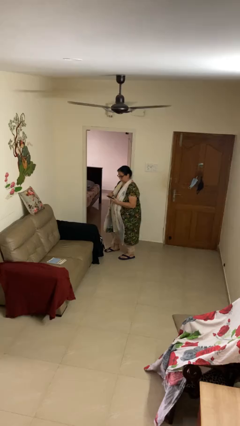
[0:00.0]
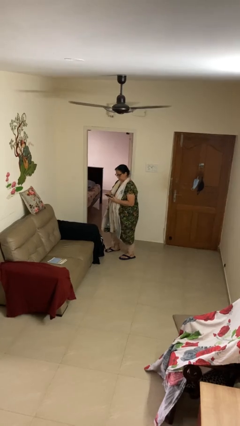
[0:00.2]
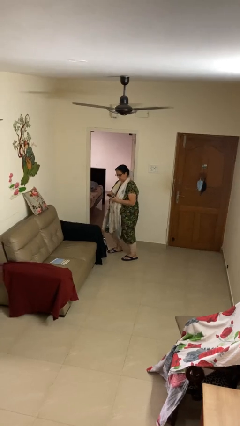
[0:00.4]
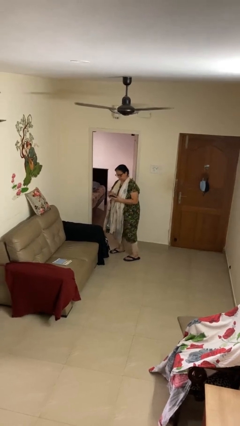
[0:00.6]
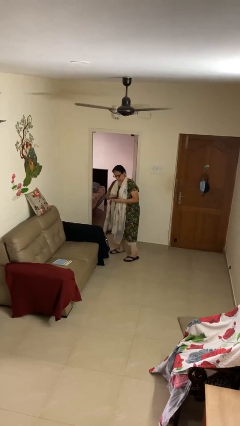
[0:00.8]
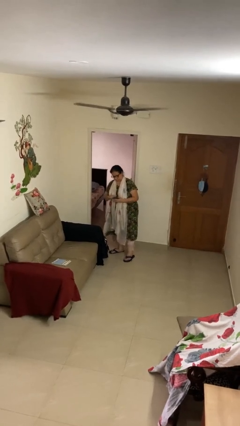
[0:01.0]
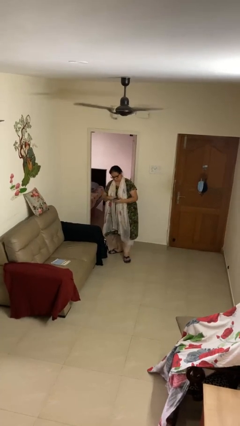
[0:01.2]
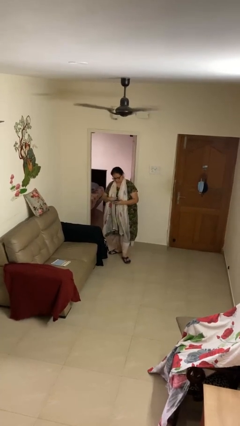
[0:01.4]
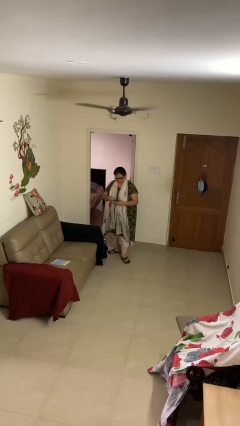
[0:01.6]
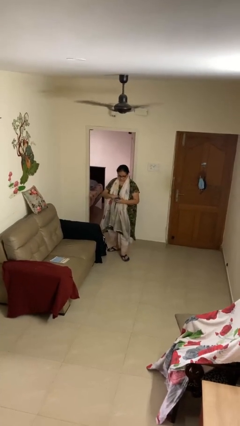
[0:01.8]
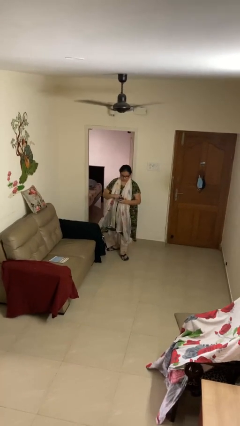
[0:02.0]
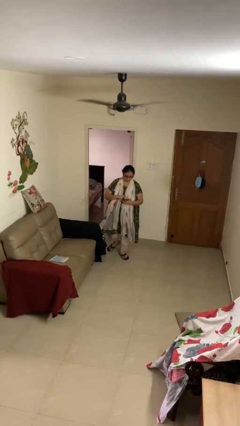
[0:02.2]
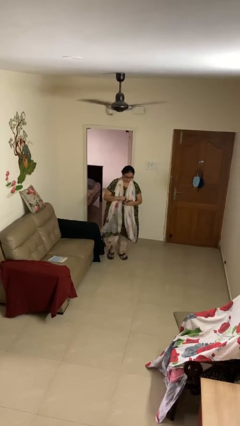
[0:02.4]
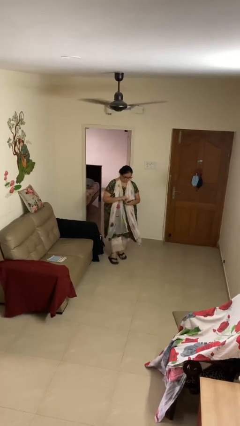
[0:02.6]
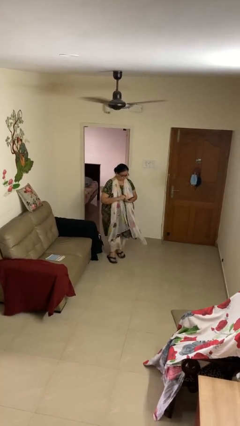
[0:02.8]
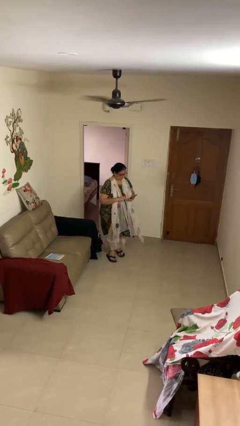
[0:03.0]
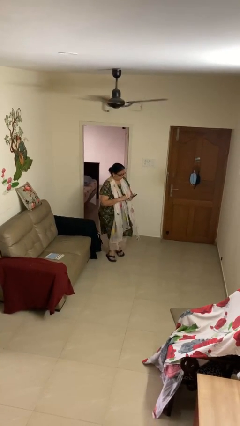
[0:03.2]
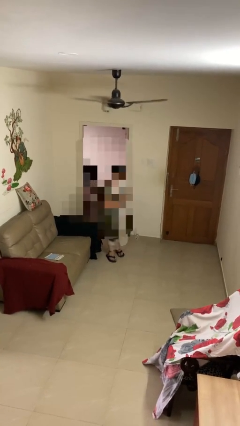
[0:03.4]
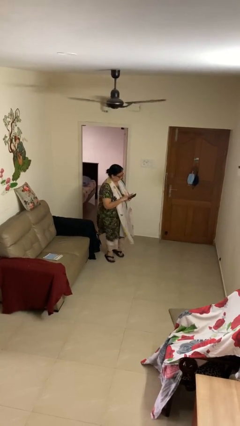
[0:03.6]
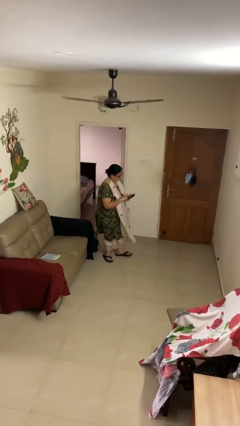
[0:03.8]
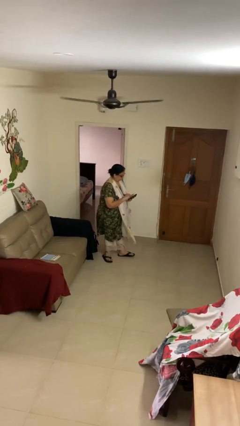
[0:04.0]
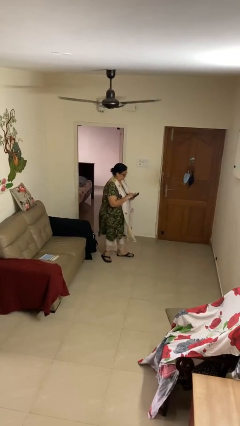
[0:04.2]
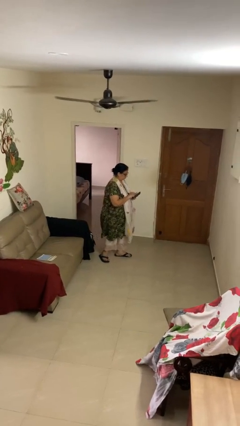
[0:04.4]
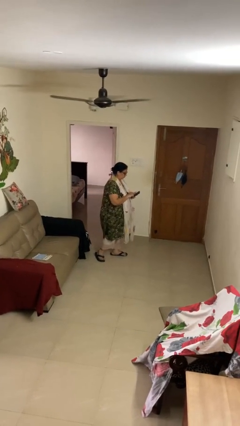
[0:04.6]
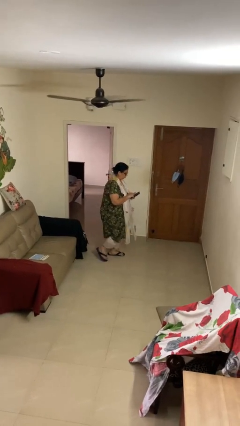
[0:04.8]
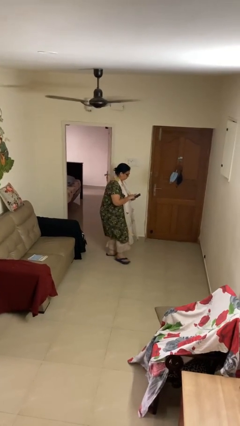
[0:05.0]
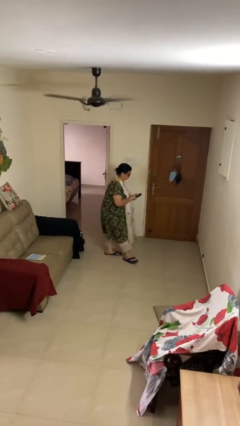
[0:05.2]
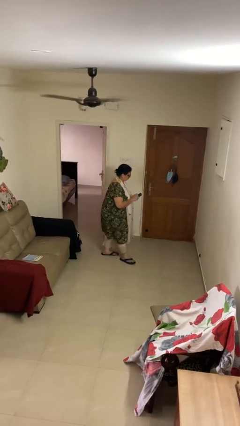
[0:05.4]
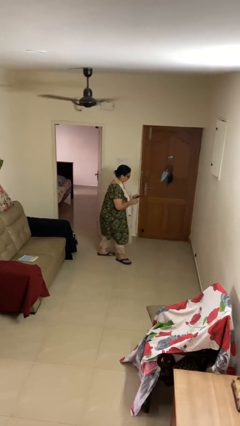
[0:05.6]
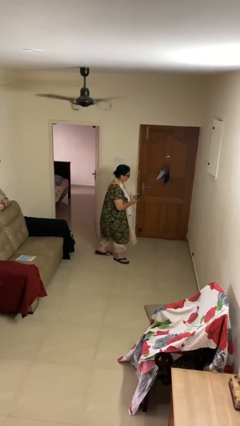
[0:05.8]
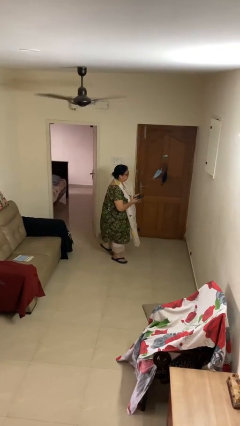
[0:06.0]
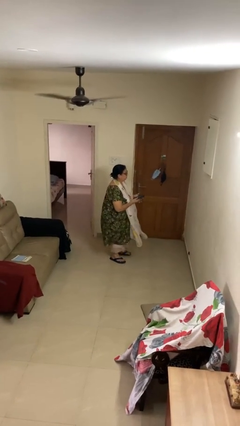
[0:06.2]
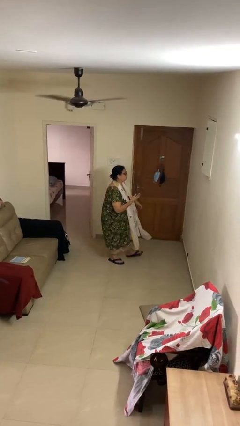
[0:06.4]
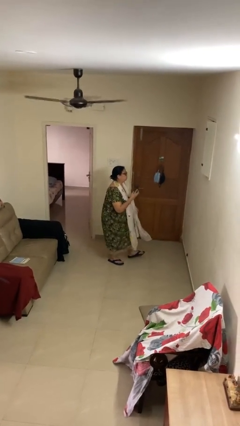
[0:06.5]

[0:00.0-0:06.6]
person texts on phone

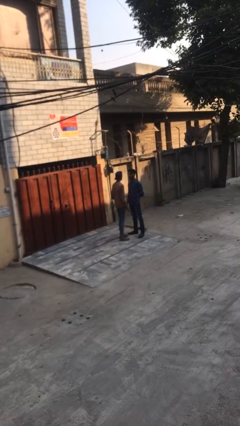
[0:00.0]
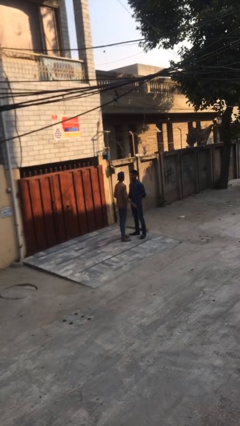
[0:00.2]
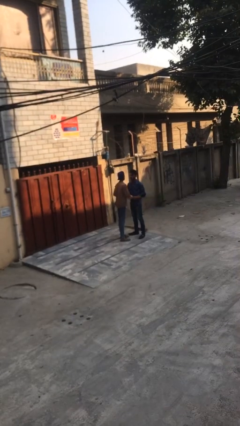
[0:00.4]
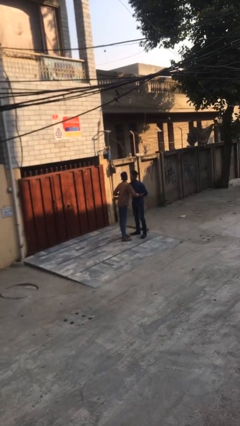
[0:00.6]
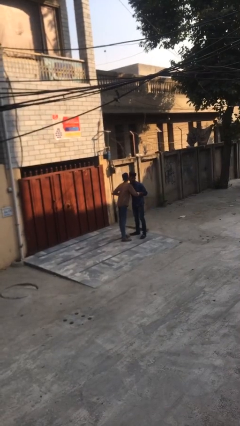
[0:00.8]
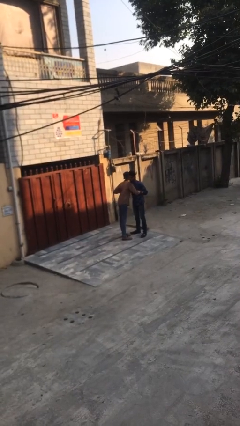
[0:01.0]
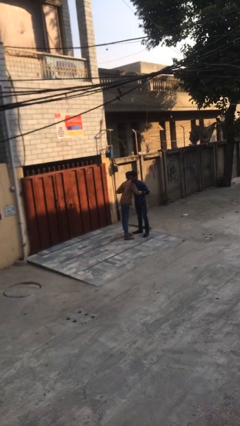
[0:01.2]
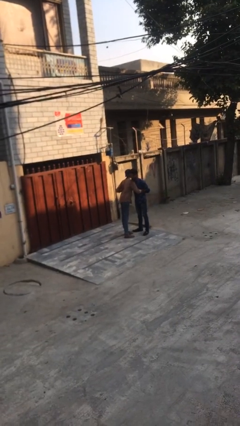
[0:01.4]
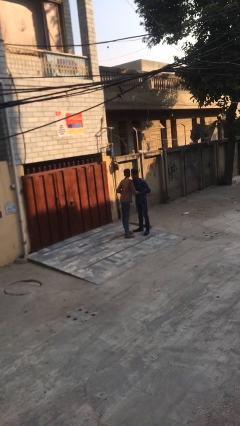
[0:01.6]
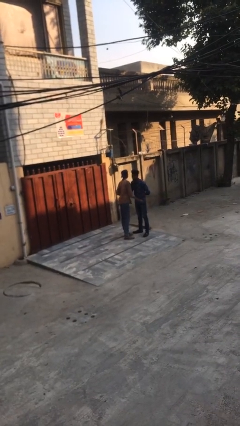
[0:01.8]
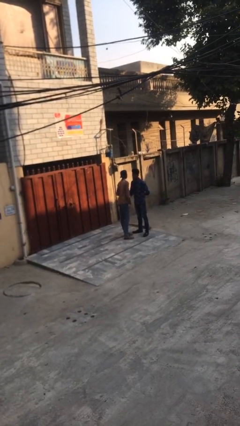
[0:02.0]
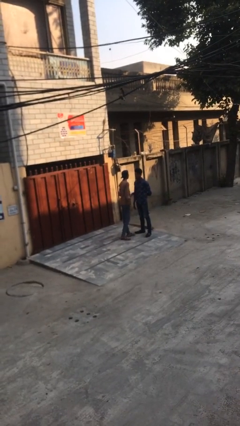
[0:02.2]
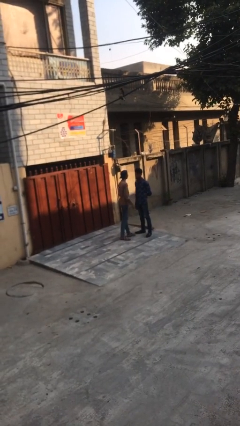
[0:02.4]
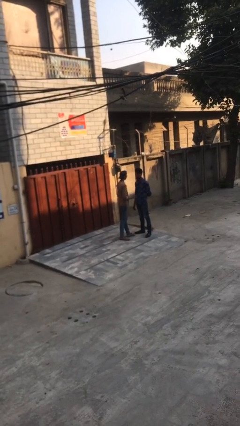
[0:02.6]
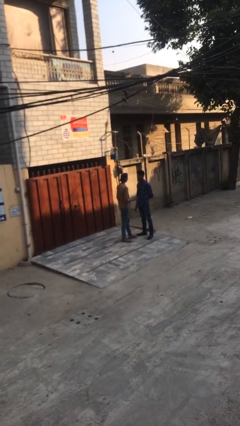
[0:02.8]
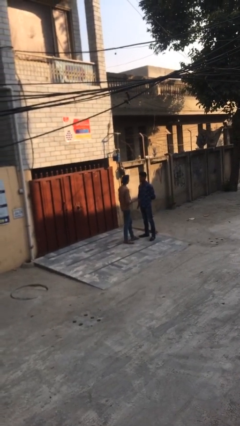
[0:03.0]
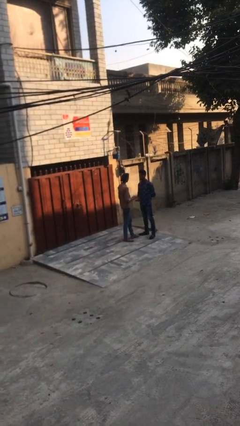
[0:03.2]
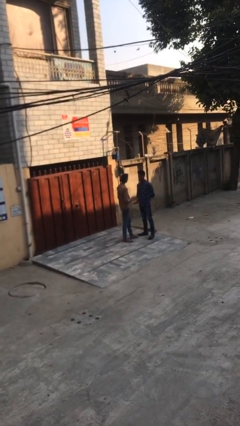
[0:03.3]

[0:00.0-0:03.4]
person embraces person

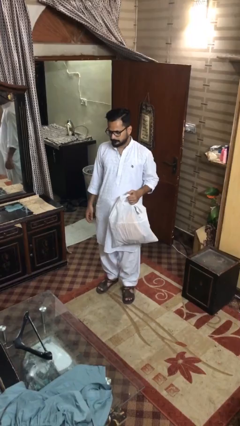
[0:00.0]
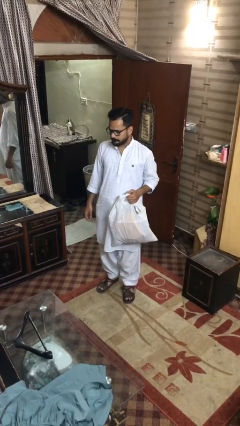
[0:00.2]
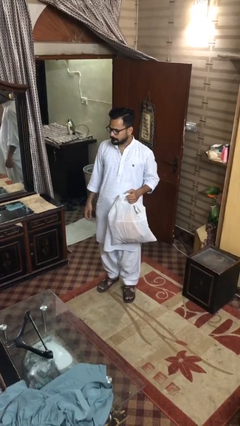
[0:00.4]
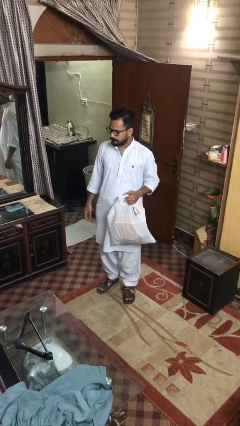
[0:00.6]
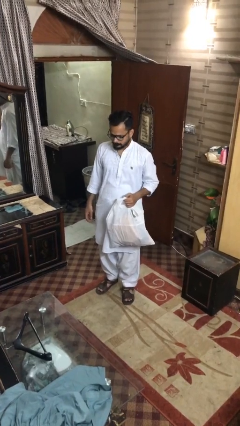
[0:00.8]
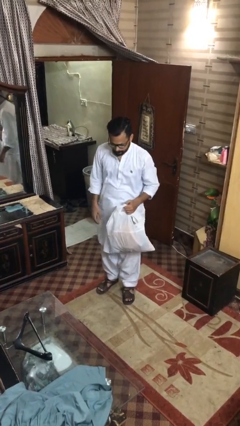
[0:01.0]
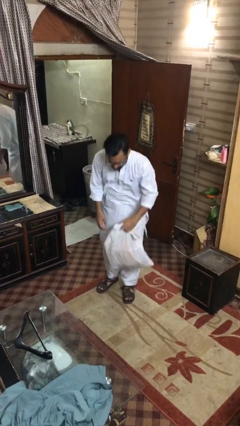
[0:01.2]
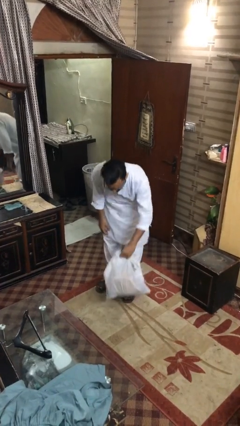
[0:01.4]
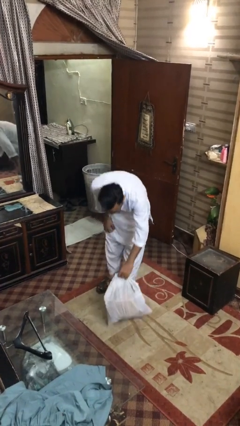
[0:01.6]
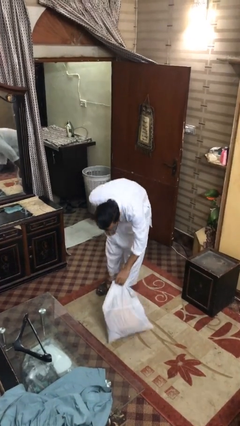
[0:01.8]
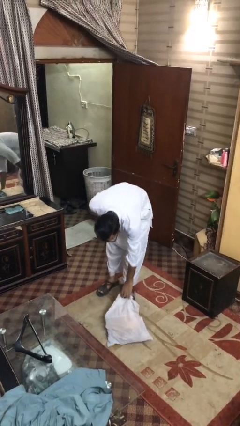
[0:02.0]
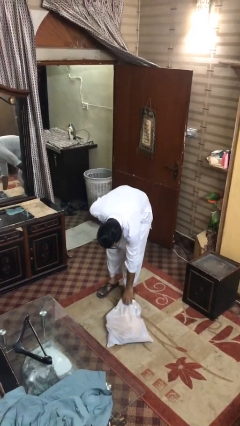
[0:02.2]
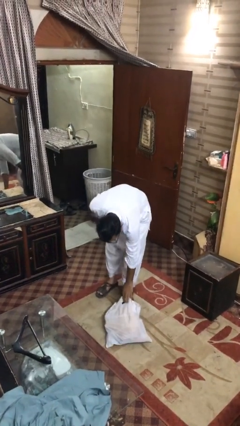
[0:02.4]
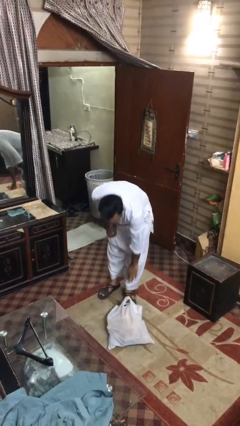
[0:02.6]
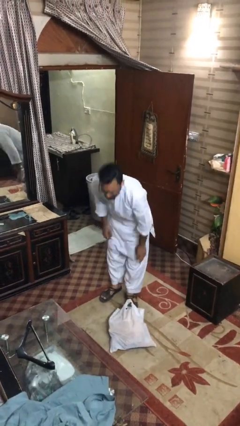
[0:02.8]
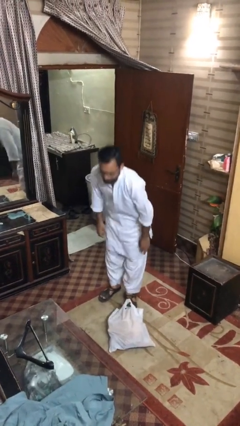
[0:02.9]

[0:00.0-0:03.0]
person puts down object on floor

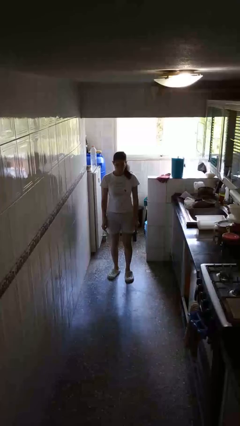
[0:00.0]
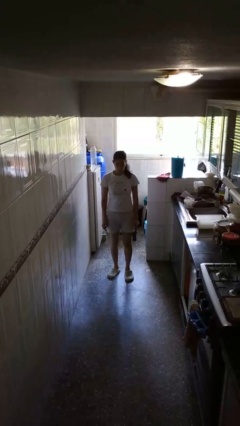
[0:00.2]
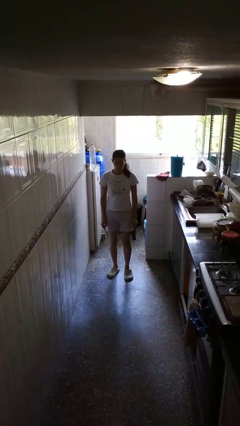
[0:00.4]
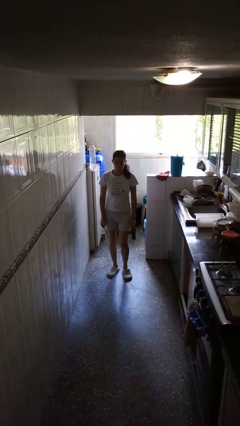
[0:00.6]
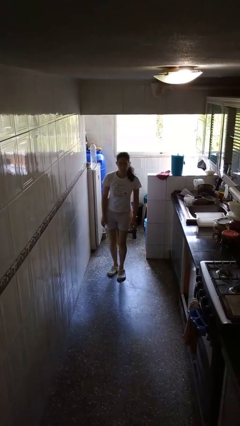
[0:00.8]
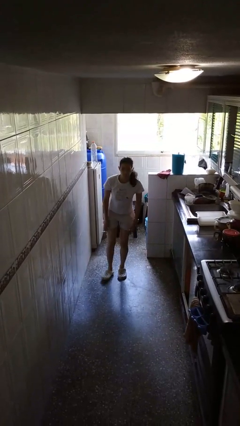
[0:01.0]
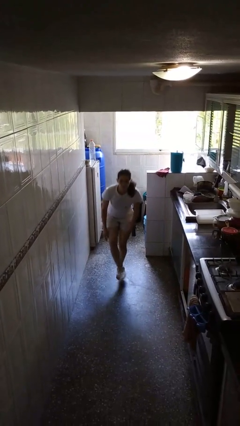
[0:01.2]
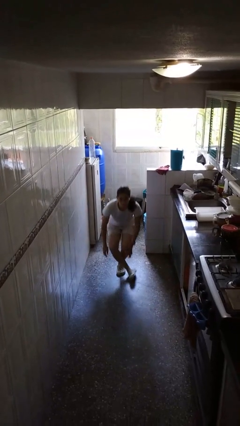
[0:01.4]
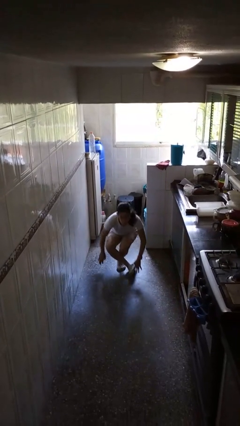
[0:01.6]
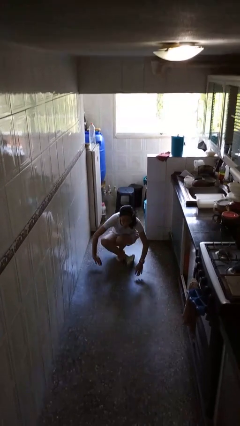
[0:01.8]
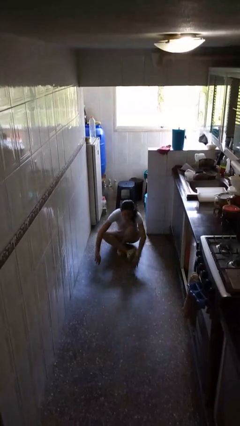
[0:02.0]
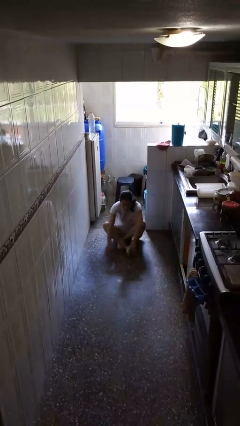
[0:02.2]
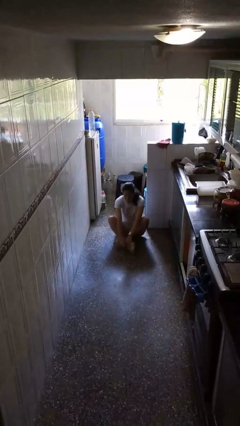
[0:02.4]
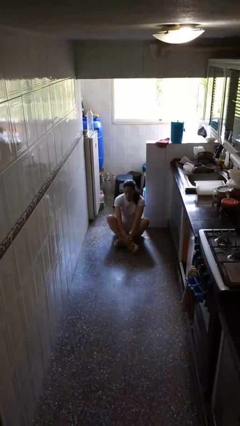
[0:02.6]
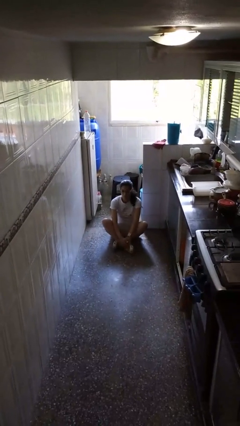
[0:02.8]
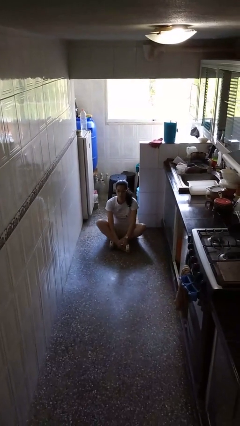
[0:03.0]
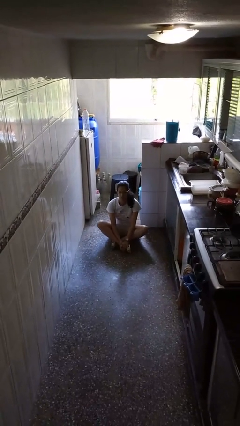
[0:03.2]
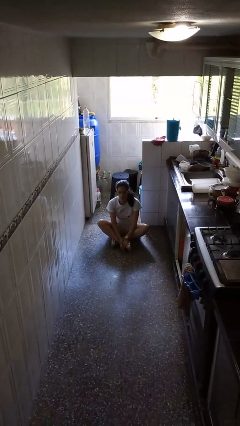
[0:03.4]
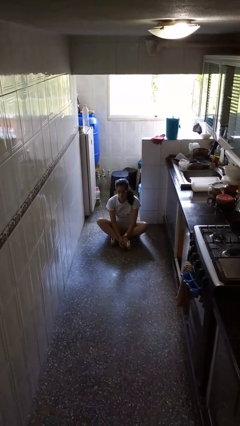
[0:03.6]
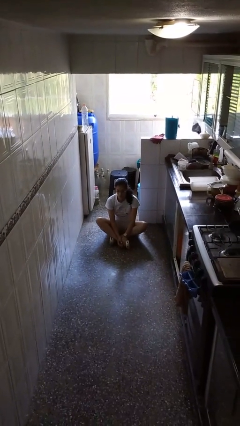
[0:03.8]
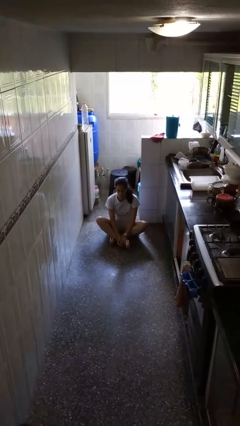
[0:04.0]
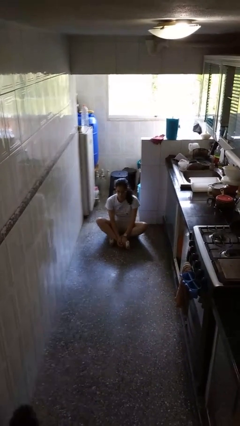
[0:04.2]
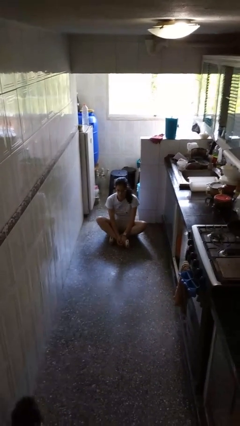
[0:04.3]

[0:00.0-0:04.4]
person sits crisscross

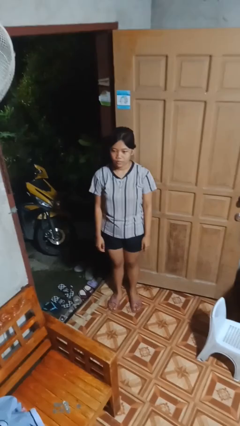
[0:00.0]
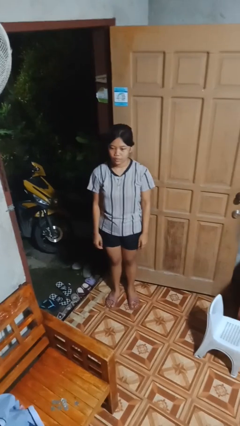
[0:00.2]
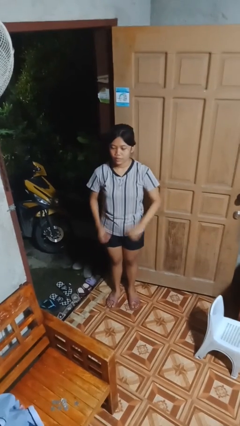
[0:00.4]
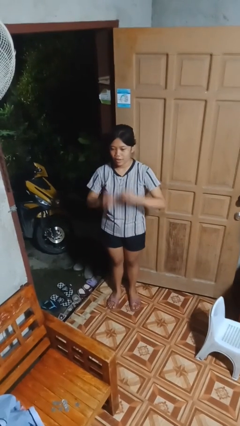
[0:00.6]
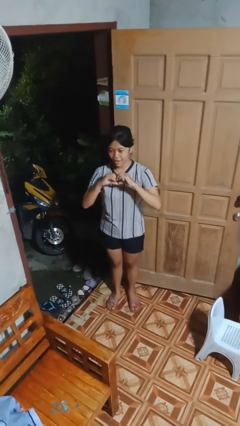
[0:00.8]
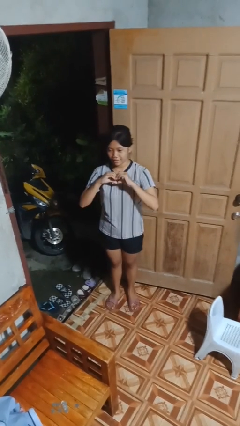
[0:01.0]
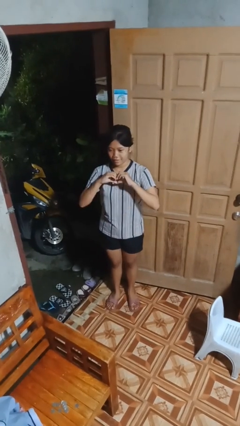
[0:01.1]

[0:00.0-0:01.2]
person gestures heart
